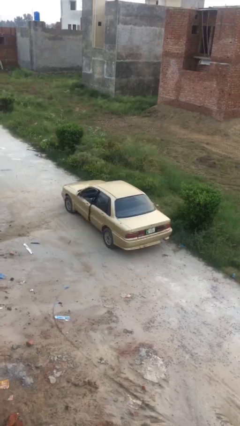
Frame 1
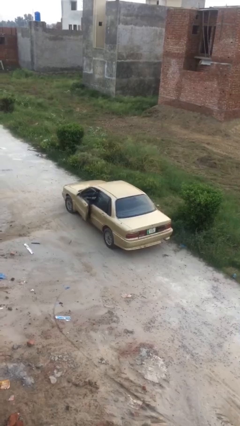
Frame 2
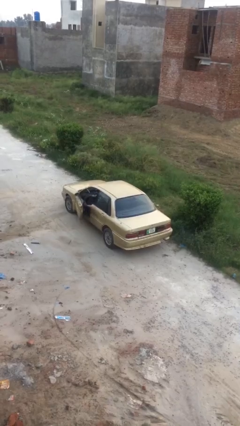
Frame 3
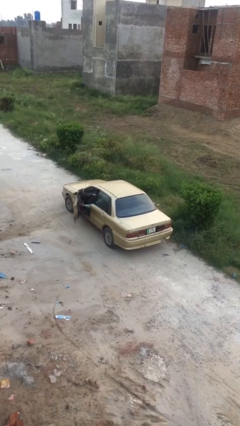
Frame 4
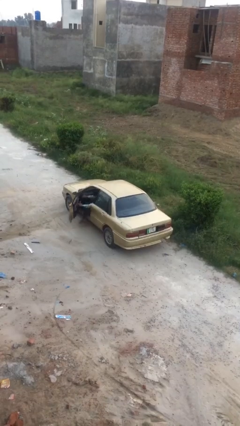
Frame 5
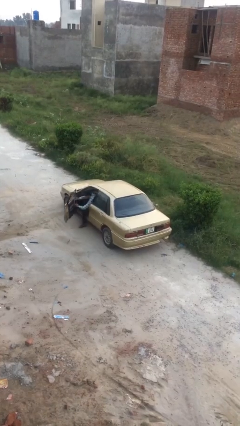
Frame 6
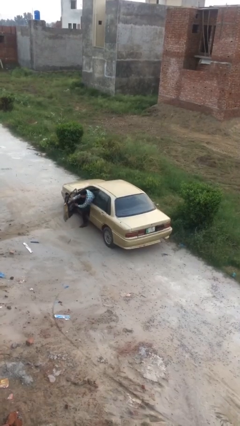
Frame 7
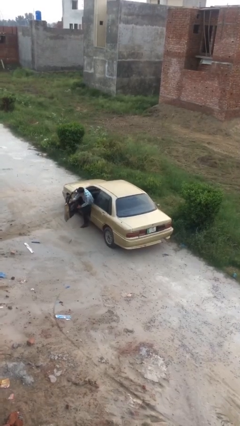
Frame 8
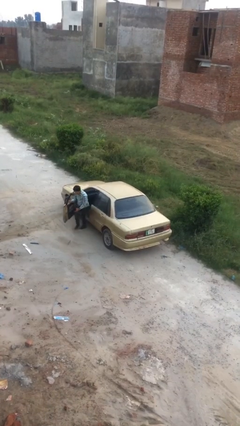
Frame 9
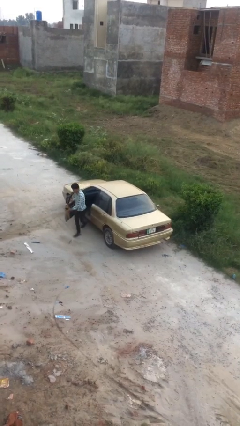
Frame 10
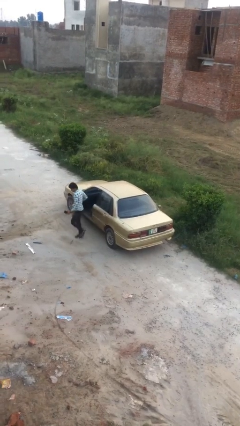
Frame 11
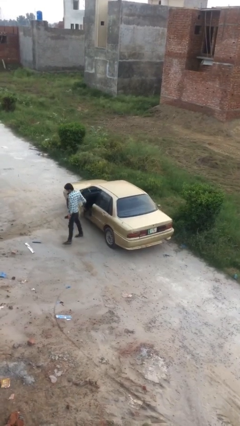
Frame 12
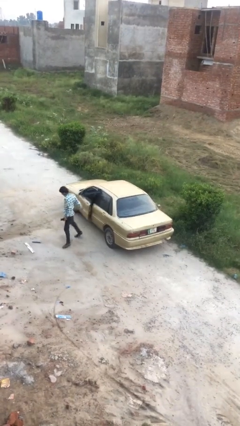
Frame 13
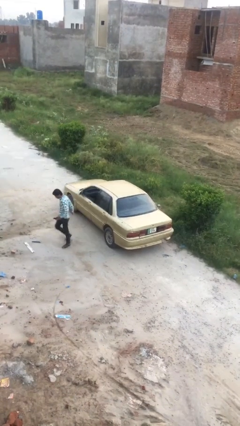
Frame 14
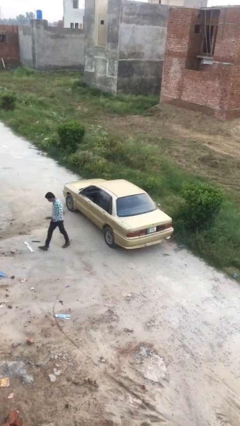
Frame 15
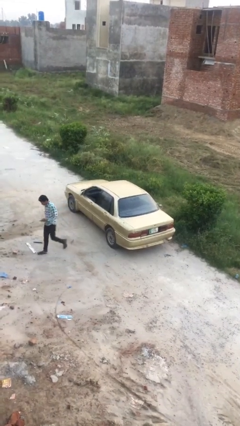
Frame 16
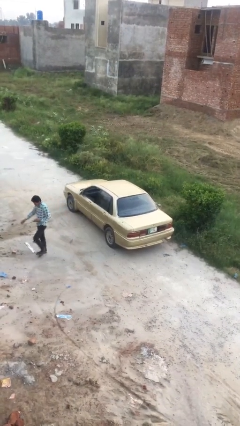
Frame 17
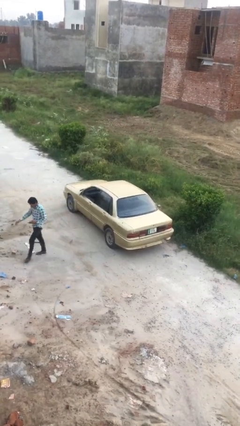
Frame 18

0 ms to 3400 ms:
car drops off person

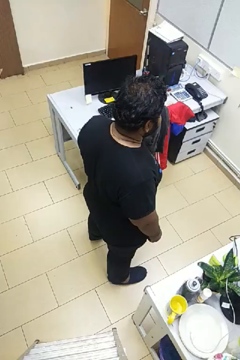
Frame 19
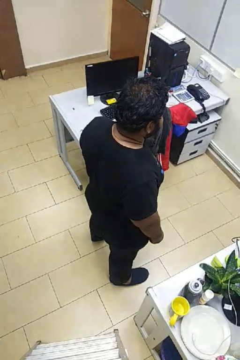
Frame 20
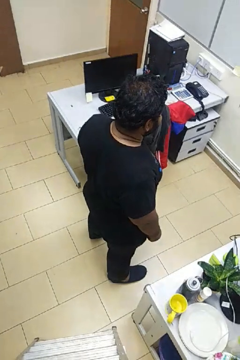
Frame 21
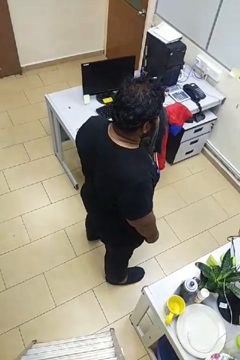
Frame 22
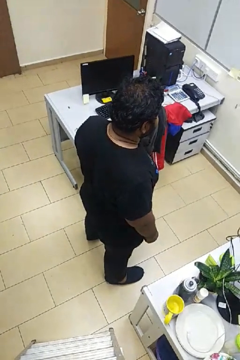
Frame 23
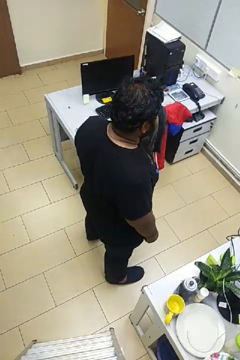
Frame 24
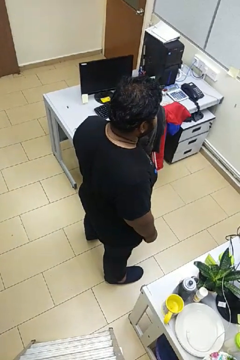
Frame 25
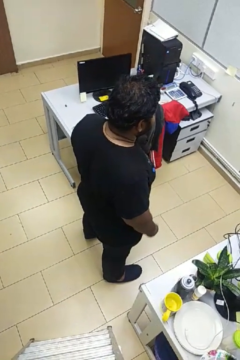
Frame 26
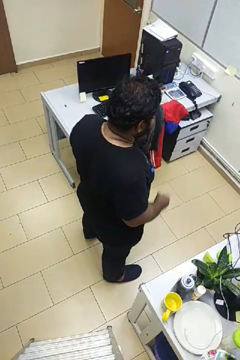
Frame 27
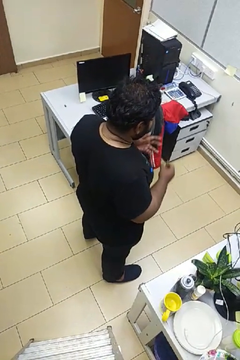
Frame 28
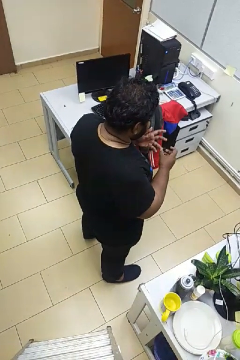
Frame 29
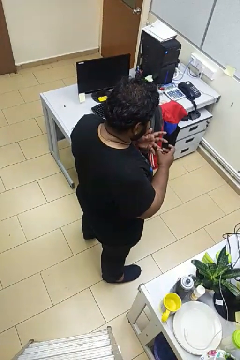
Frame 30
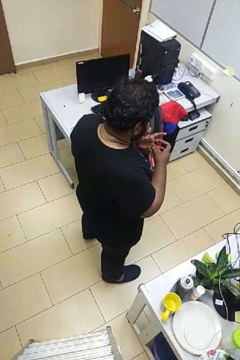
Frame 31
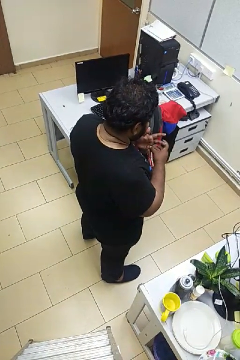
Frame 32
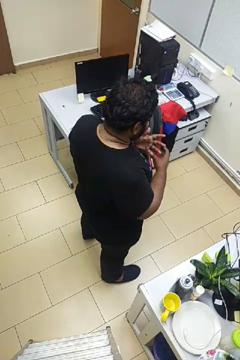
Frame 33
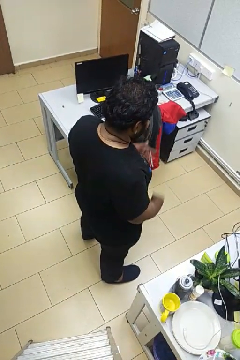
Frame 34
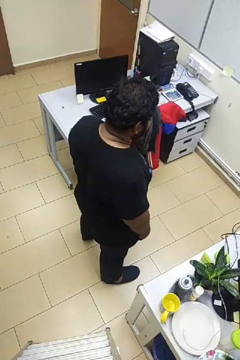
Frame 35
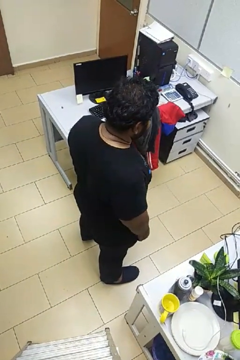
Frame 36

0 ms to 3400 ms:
person puts on ring

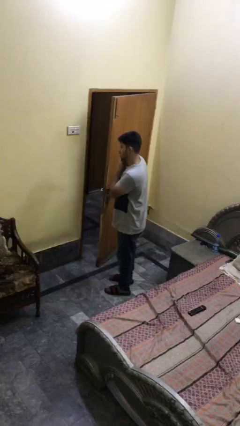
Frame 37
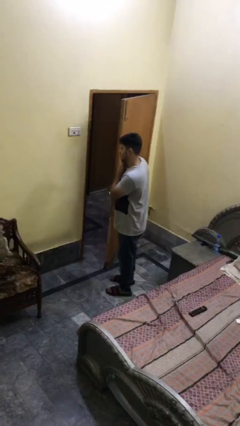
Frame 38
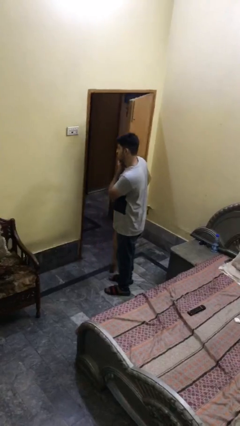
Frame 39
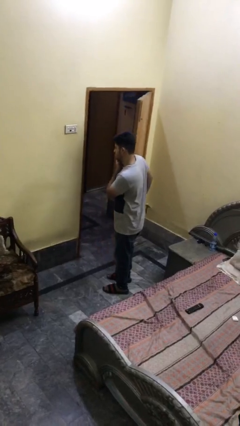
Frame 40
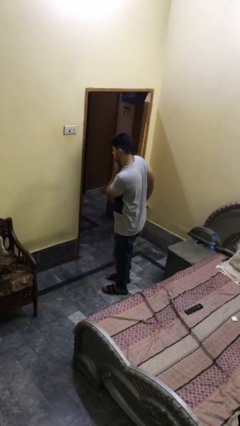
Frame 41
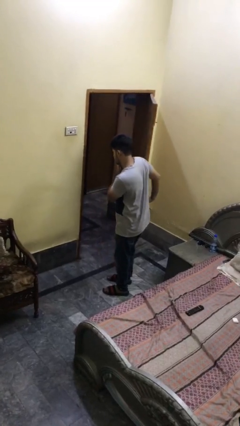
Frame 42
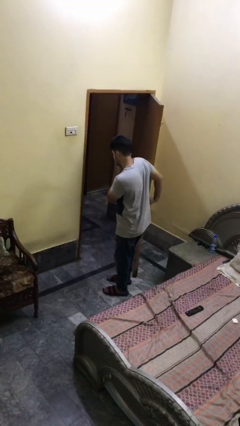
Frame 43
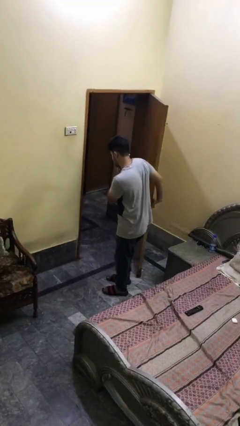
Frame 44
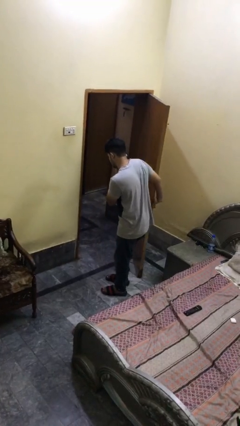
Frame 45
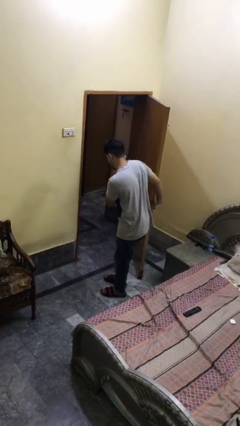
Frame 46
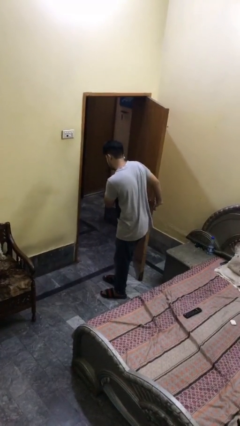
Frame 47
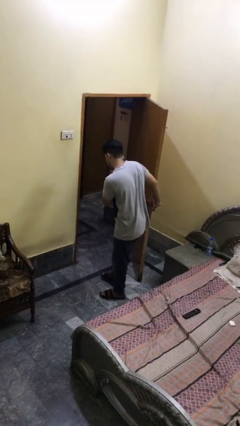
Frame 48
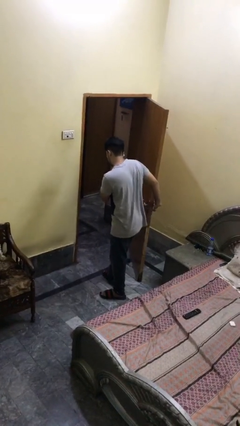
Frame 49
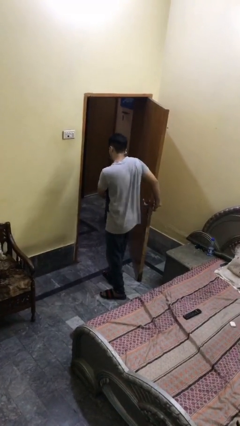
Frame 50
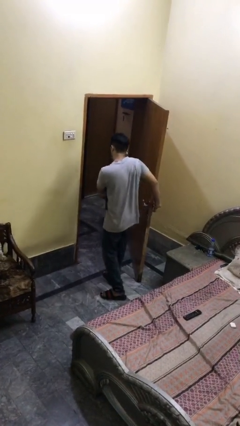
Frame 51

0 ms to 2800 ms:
person opens facility door

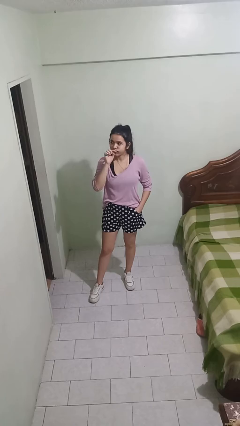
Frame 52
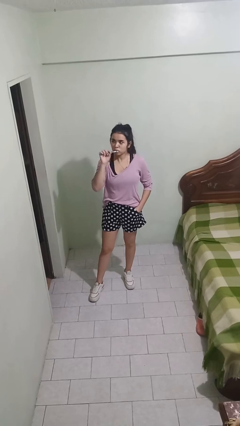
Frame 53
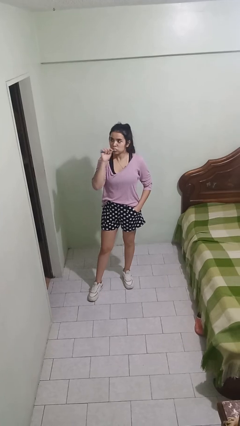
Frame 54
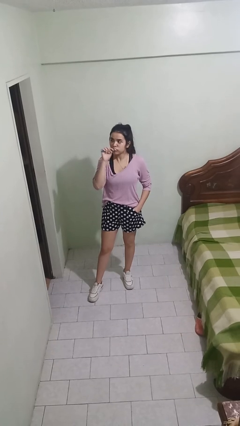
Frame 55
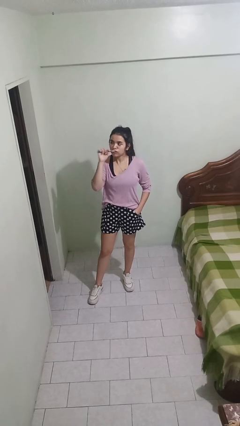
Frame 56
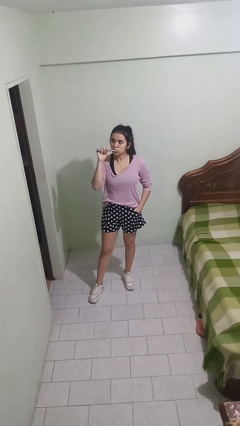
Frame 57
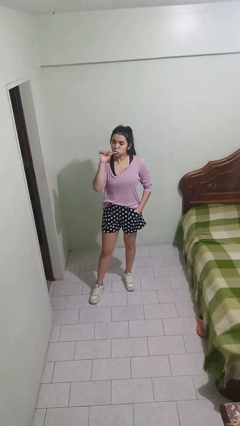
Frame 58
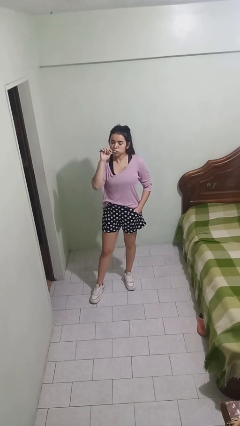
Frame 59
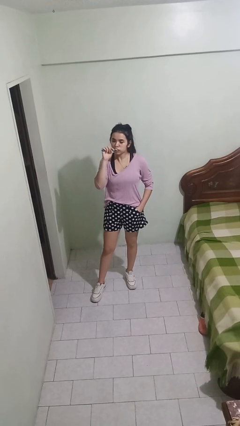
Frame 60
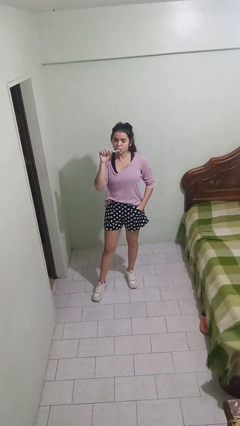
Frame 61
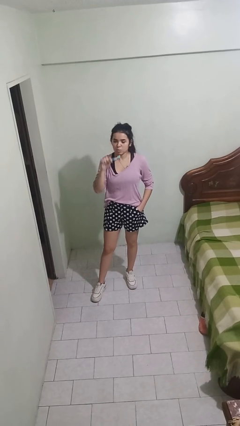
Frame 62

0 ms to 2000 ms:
person brushes teeth

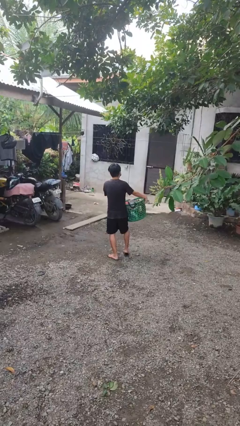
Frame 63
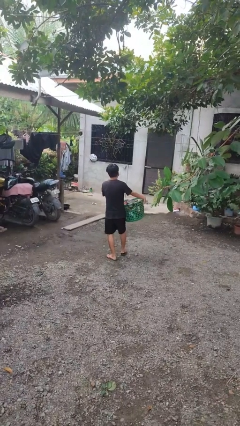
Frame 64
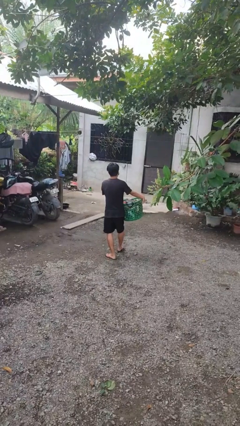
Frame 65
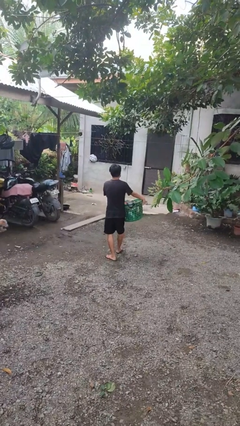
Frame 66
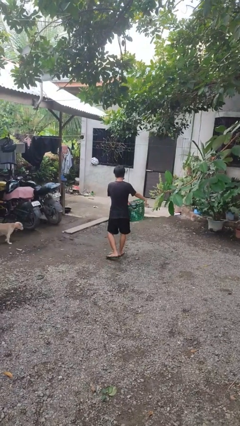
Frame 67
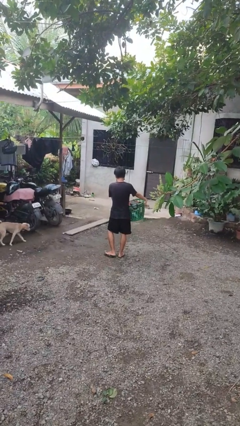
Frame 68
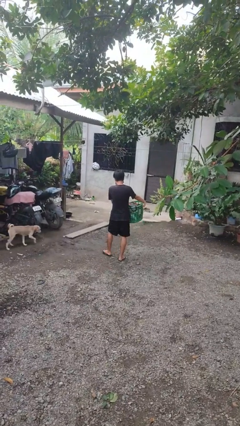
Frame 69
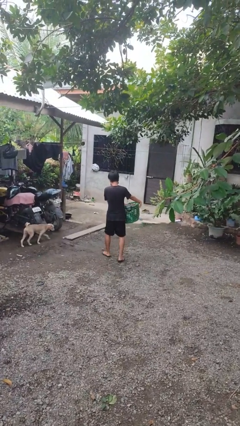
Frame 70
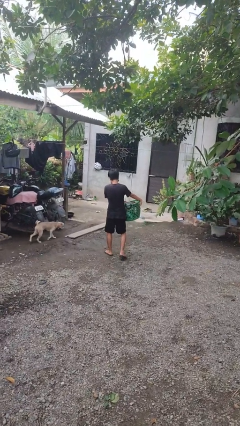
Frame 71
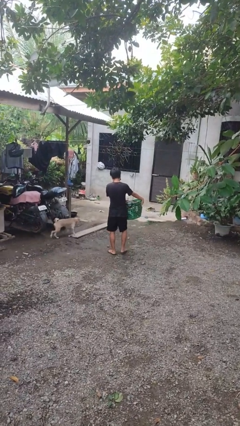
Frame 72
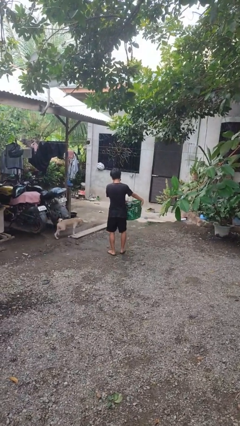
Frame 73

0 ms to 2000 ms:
person carries laundry basket

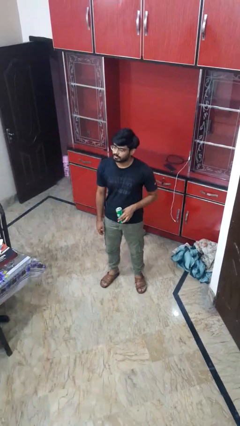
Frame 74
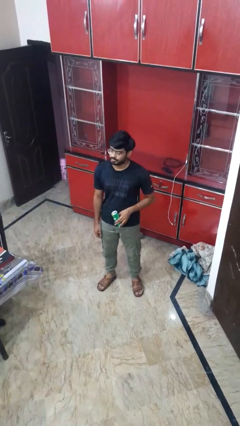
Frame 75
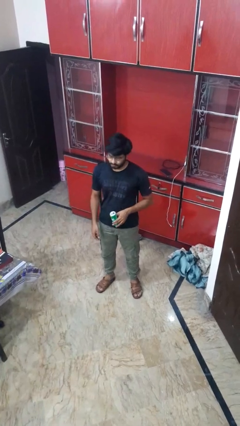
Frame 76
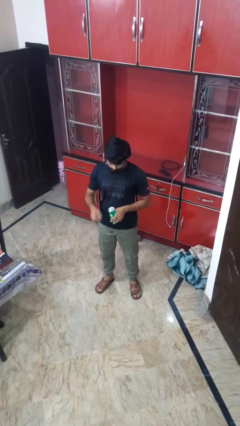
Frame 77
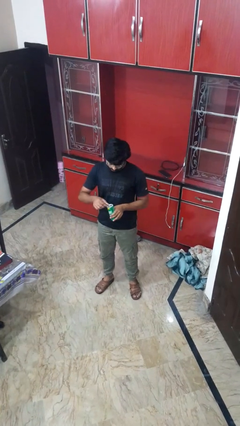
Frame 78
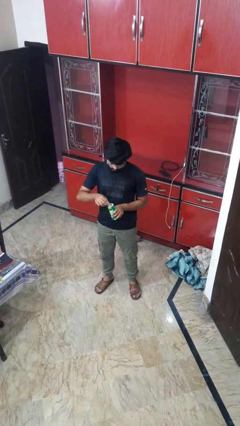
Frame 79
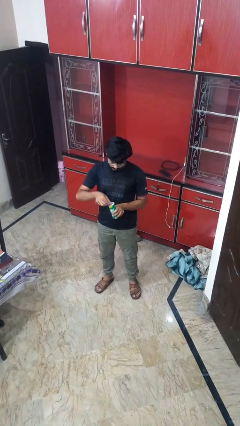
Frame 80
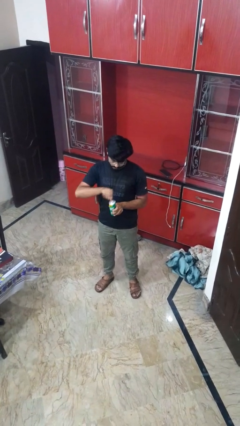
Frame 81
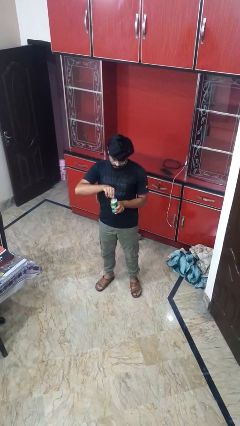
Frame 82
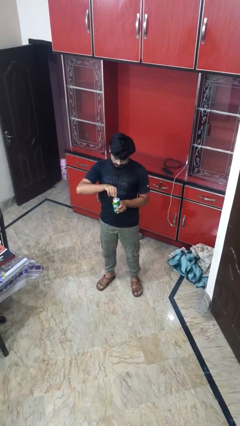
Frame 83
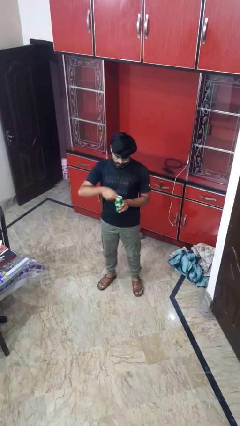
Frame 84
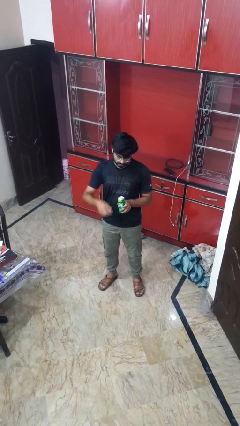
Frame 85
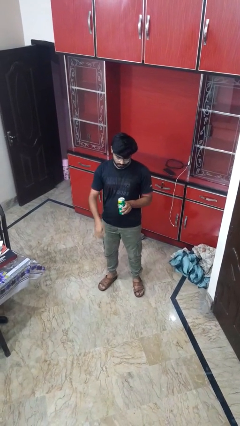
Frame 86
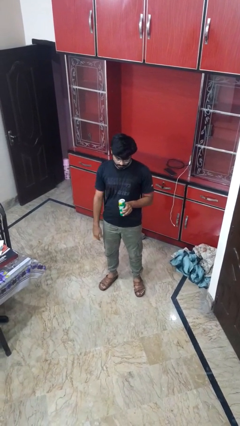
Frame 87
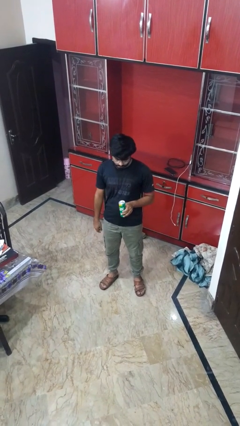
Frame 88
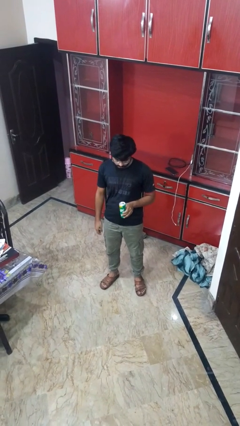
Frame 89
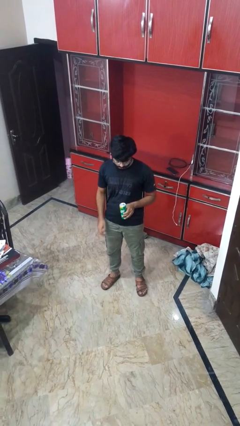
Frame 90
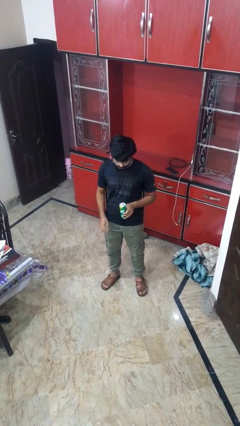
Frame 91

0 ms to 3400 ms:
person opens beverage can

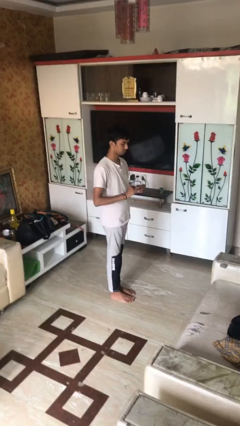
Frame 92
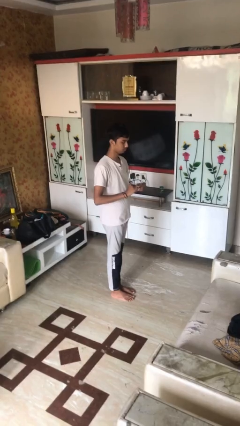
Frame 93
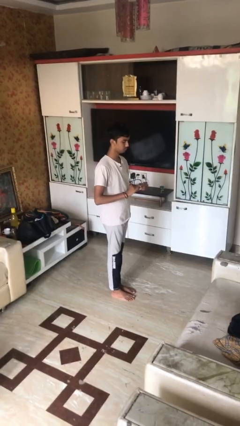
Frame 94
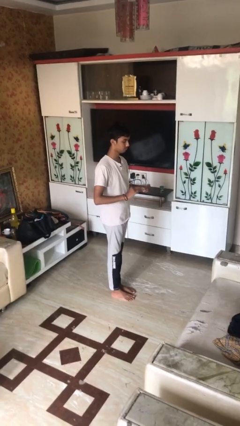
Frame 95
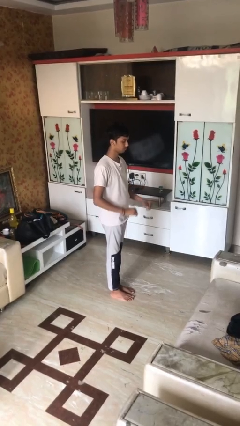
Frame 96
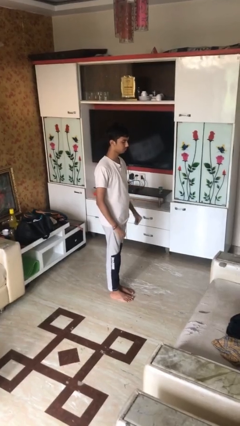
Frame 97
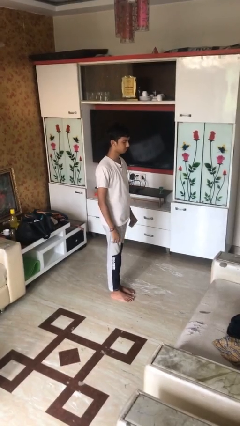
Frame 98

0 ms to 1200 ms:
person takes off ring
